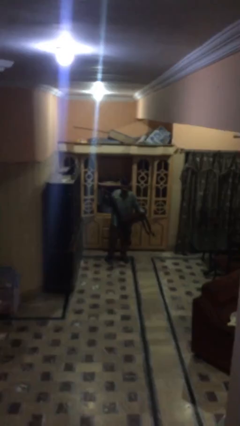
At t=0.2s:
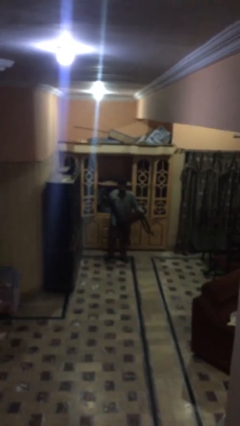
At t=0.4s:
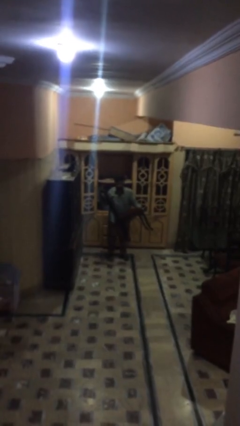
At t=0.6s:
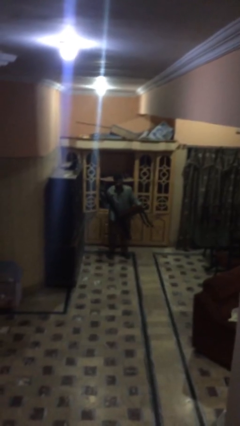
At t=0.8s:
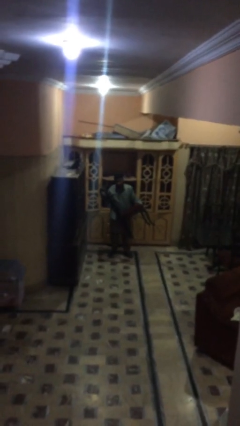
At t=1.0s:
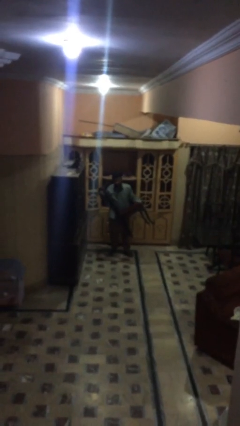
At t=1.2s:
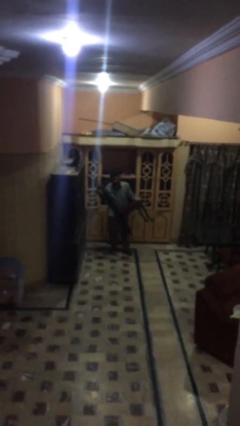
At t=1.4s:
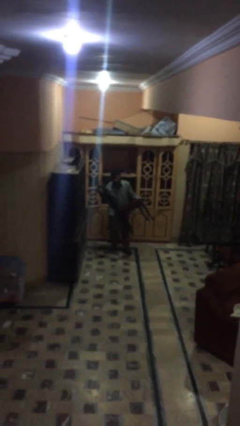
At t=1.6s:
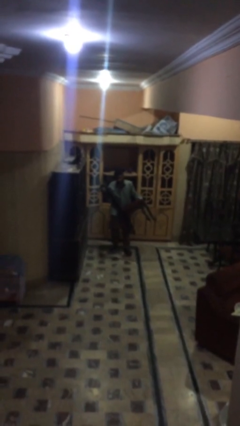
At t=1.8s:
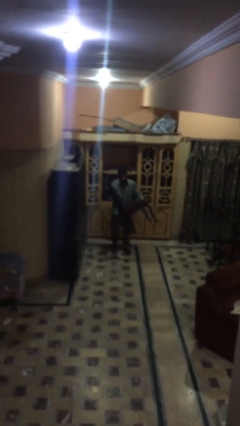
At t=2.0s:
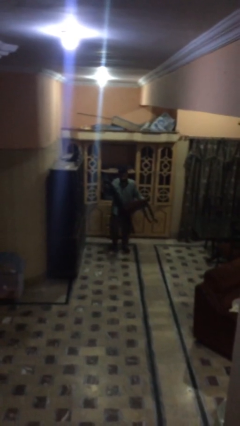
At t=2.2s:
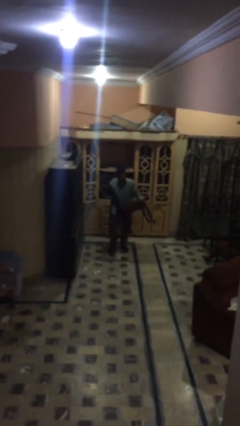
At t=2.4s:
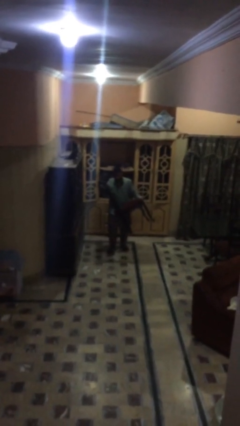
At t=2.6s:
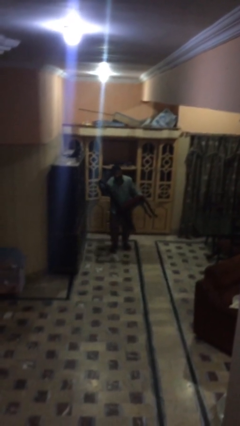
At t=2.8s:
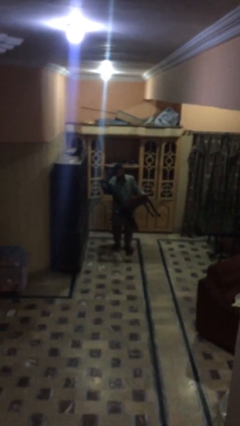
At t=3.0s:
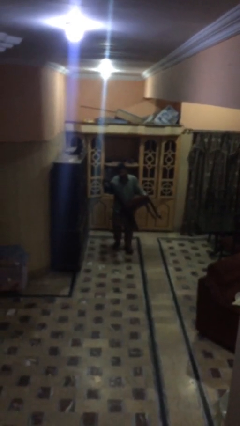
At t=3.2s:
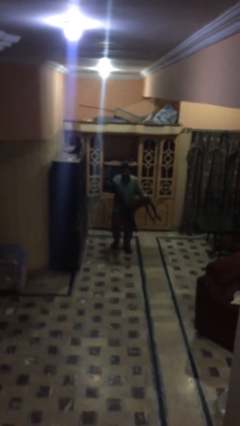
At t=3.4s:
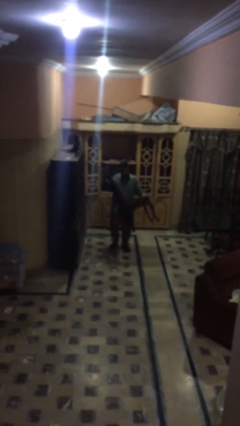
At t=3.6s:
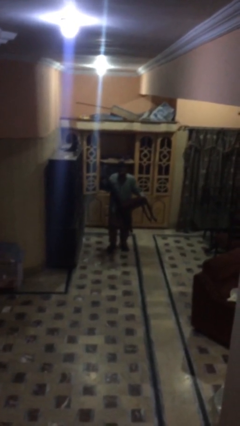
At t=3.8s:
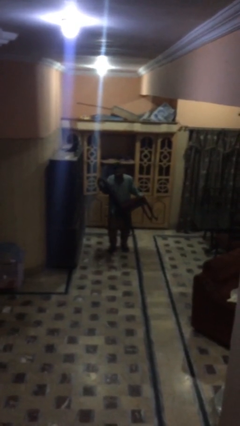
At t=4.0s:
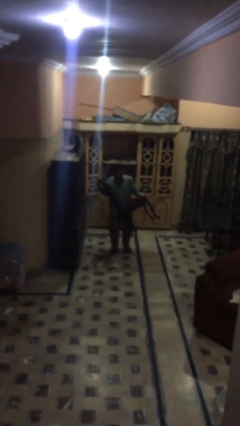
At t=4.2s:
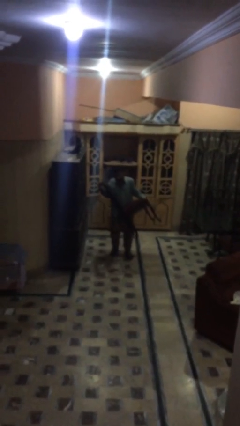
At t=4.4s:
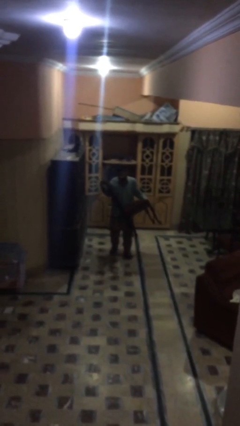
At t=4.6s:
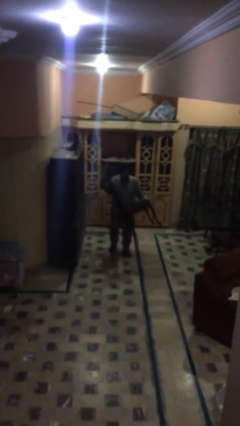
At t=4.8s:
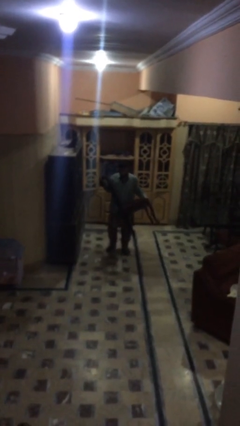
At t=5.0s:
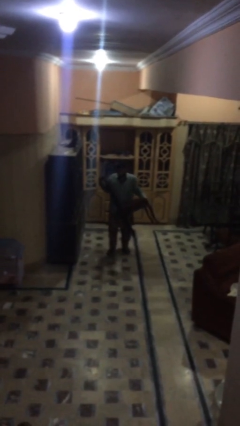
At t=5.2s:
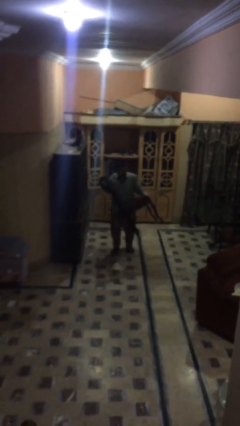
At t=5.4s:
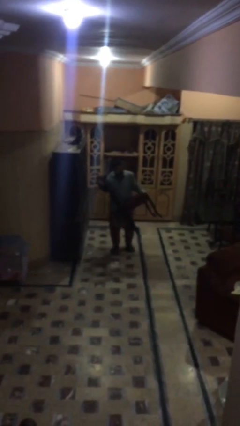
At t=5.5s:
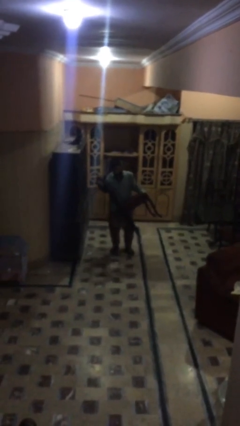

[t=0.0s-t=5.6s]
person carries heavy object

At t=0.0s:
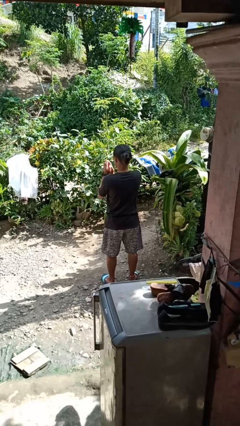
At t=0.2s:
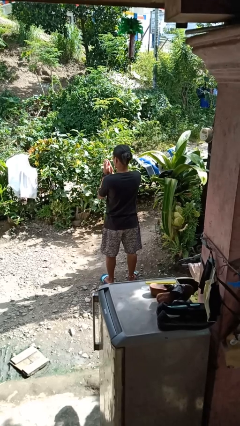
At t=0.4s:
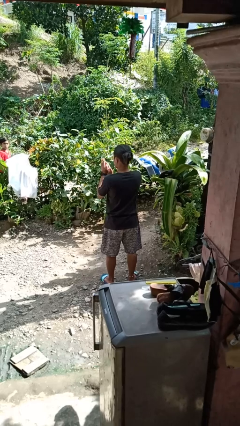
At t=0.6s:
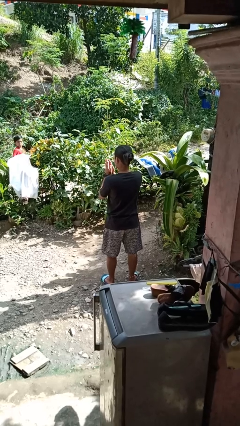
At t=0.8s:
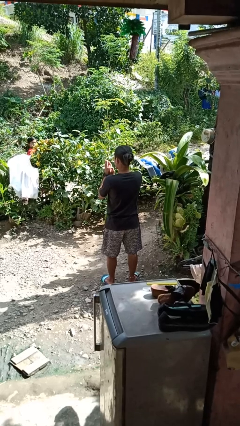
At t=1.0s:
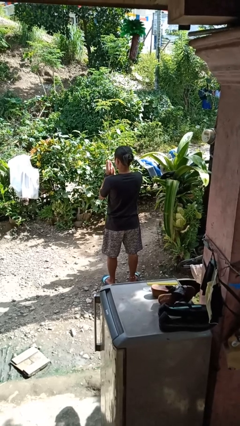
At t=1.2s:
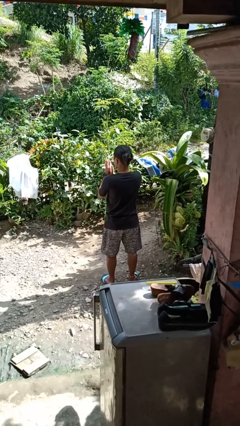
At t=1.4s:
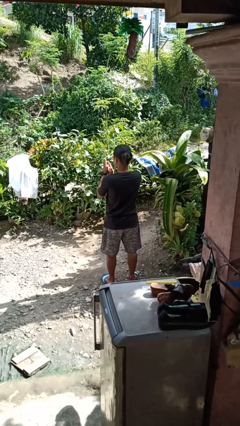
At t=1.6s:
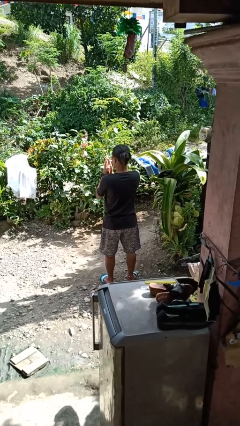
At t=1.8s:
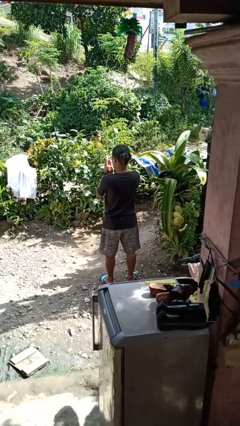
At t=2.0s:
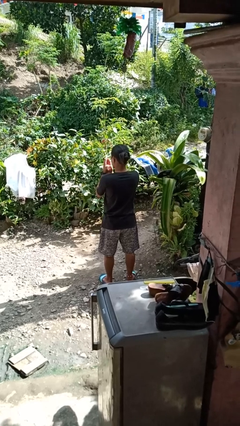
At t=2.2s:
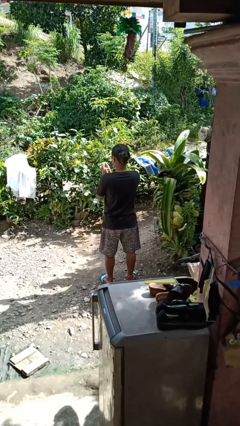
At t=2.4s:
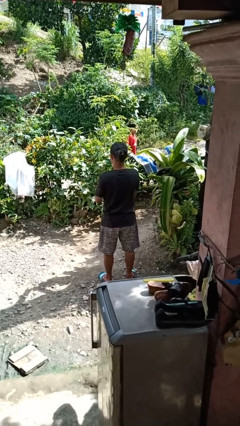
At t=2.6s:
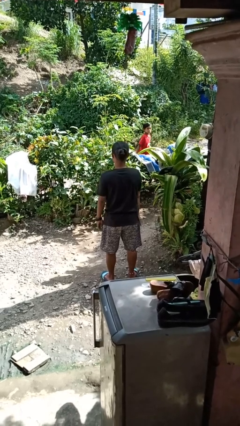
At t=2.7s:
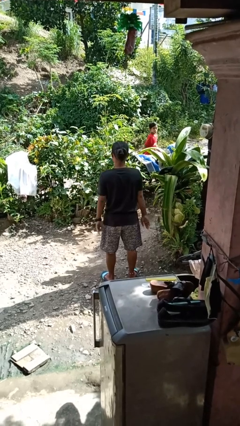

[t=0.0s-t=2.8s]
person blows into hands

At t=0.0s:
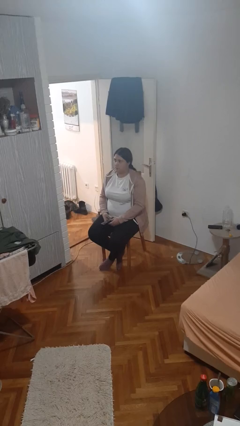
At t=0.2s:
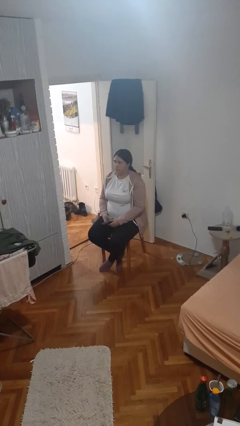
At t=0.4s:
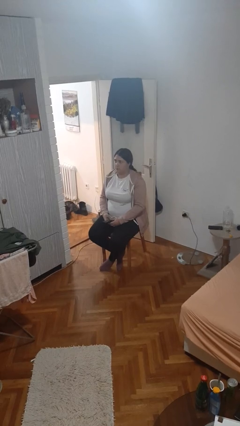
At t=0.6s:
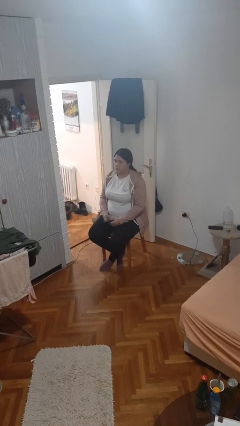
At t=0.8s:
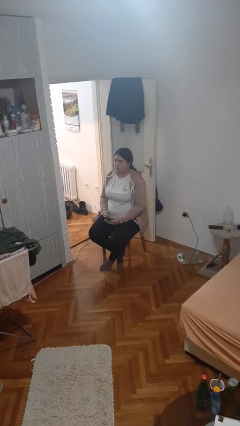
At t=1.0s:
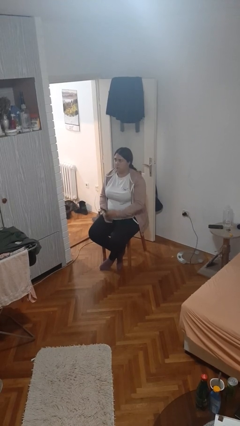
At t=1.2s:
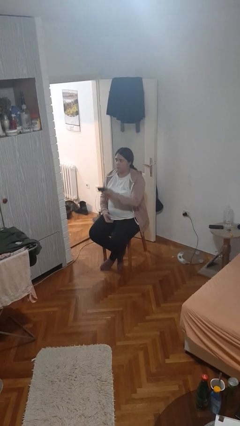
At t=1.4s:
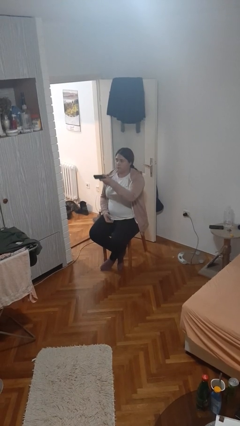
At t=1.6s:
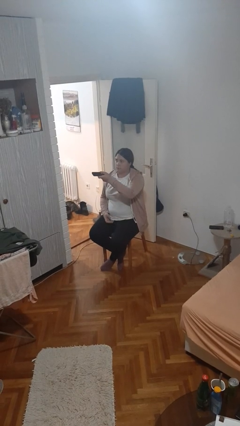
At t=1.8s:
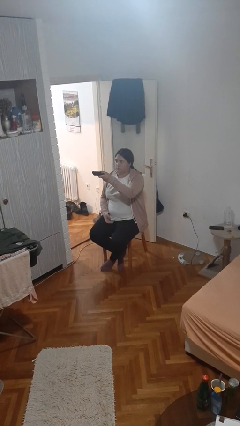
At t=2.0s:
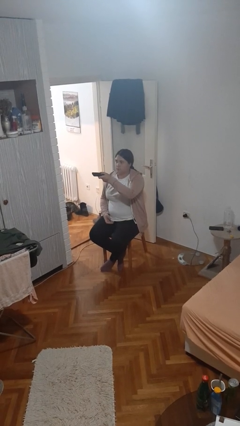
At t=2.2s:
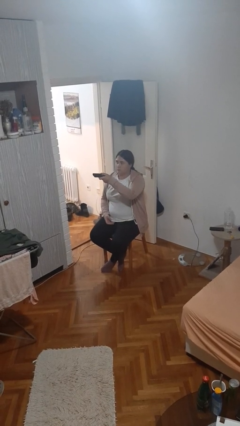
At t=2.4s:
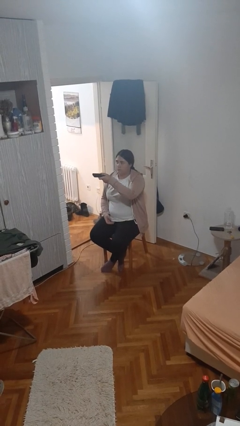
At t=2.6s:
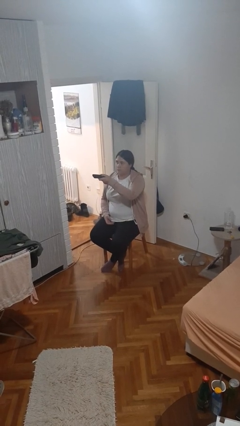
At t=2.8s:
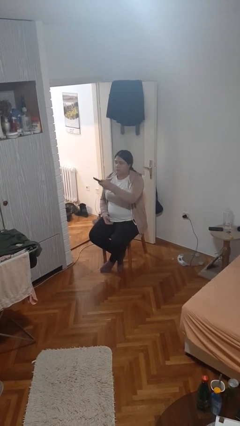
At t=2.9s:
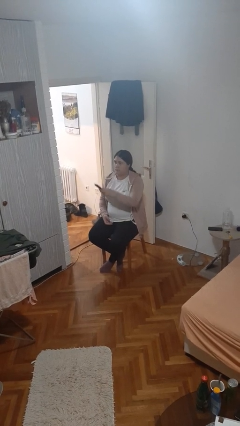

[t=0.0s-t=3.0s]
person uses television remote

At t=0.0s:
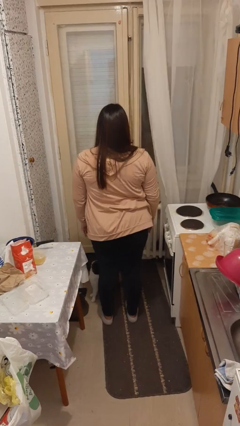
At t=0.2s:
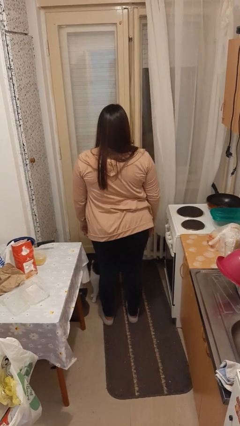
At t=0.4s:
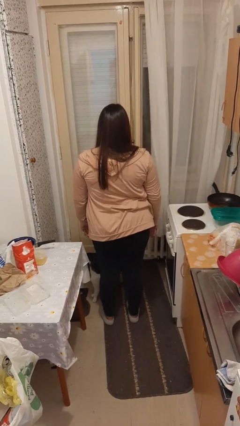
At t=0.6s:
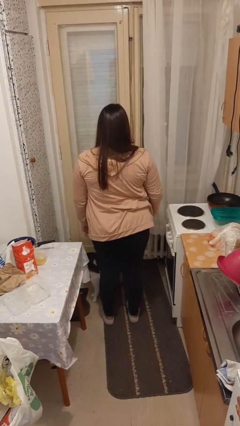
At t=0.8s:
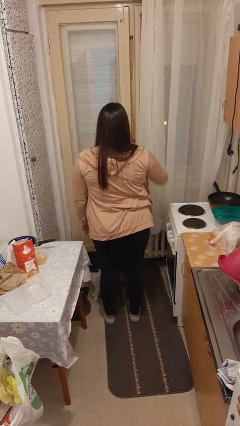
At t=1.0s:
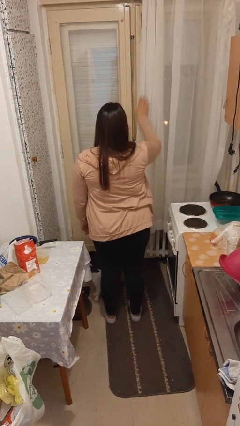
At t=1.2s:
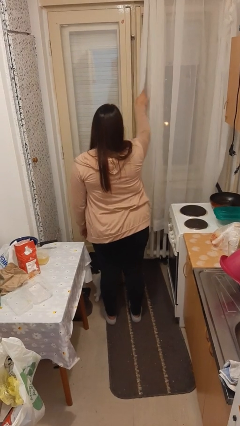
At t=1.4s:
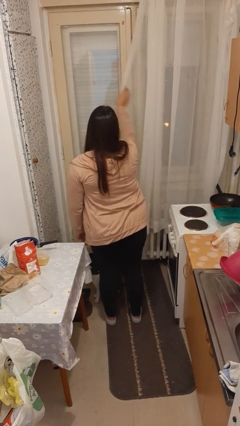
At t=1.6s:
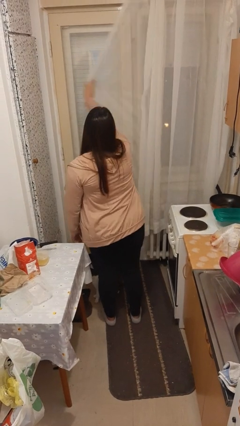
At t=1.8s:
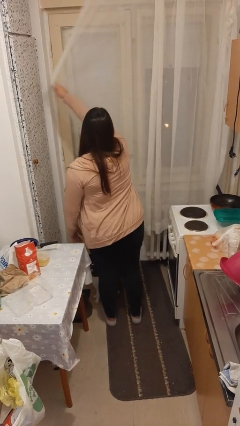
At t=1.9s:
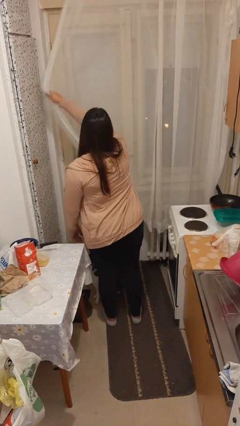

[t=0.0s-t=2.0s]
person closes curtains

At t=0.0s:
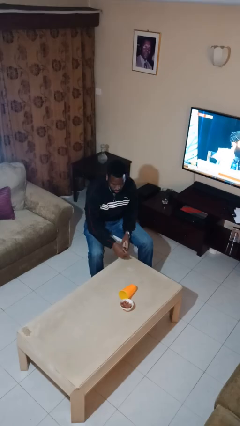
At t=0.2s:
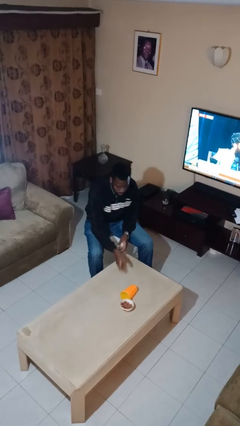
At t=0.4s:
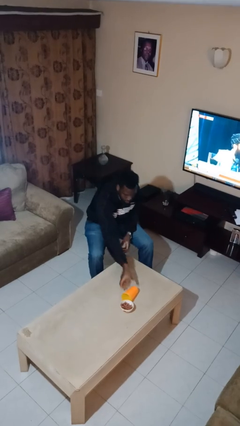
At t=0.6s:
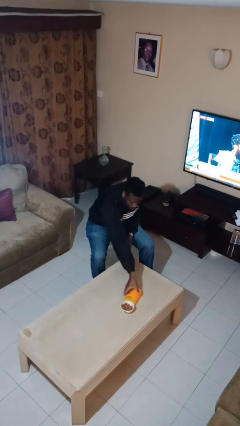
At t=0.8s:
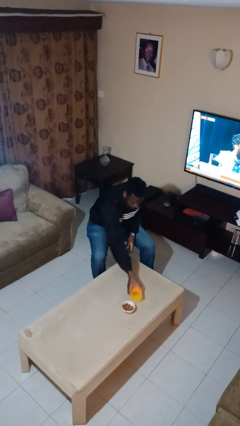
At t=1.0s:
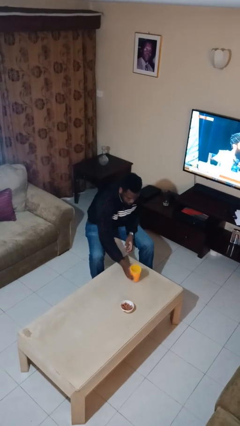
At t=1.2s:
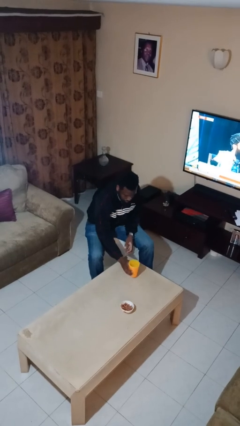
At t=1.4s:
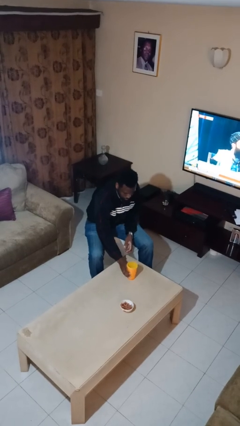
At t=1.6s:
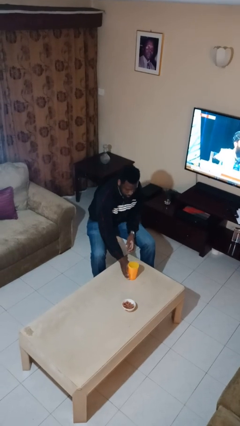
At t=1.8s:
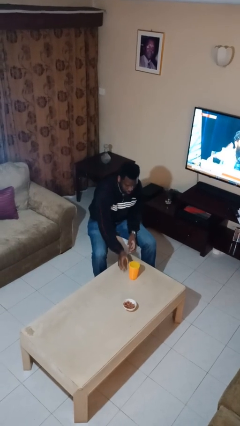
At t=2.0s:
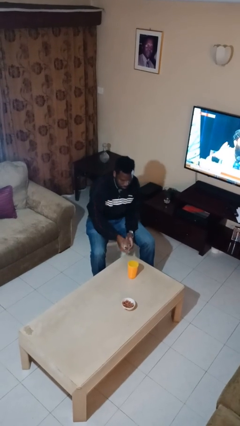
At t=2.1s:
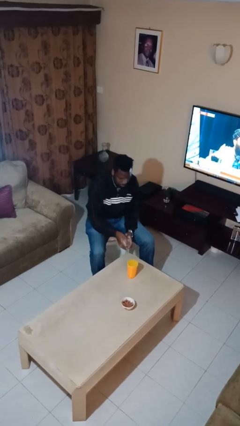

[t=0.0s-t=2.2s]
person sets upright glass

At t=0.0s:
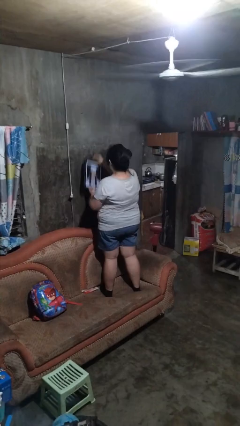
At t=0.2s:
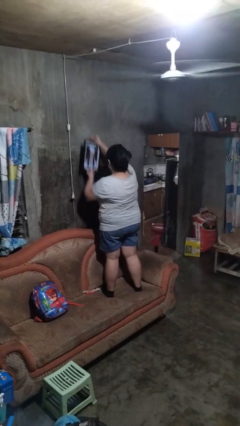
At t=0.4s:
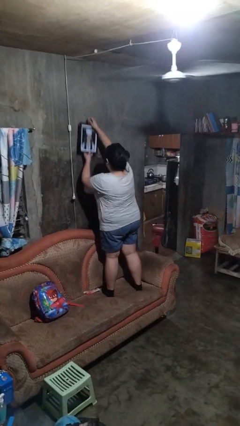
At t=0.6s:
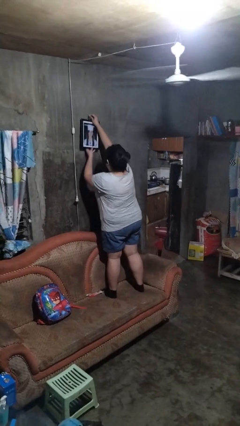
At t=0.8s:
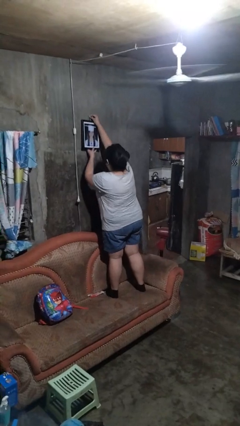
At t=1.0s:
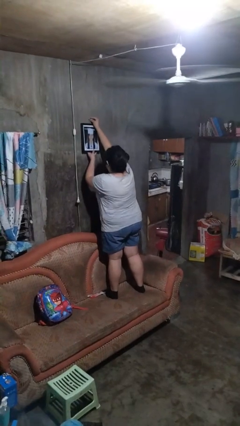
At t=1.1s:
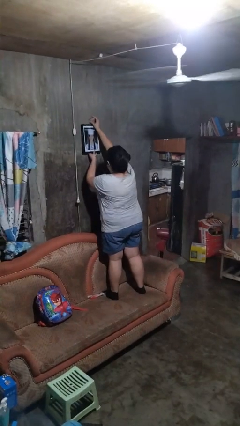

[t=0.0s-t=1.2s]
person puts up picture frame

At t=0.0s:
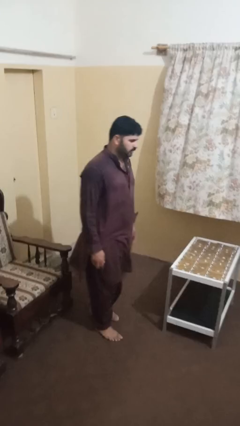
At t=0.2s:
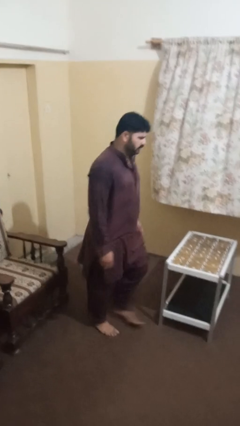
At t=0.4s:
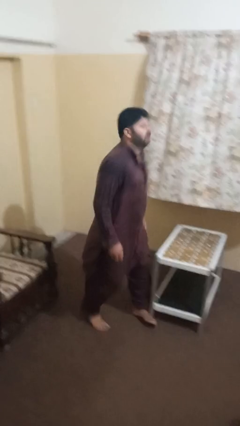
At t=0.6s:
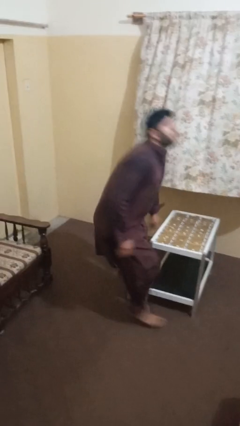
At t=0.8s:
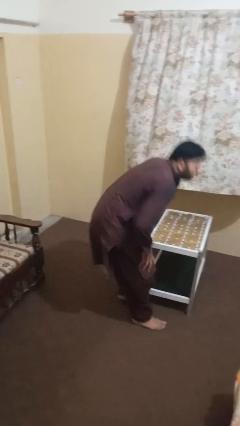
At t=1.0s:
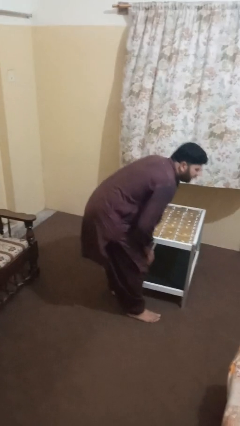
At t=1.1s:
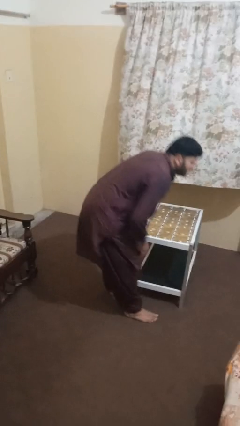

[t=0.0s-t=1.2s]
person bumps into table
